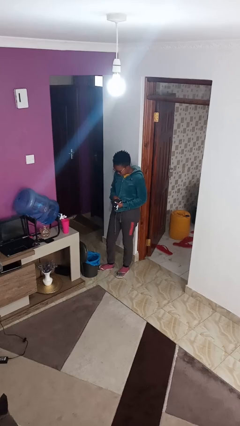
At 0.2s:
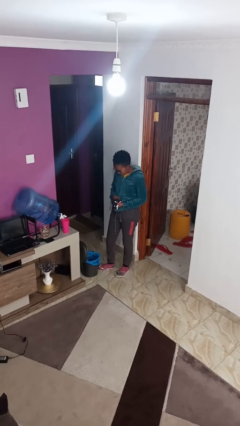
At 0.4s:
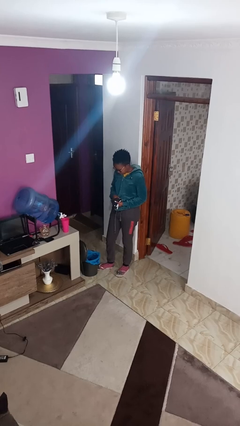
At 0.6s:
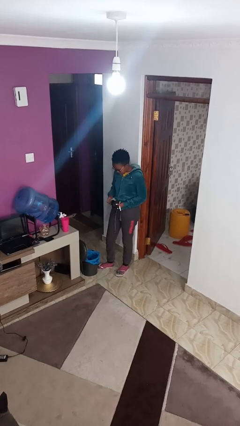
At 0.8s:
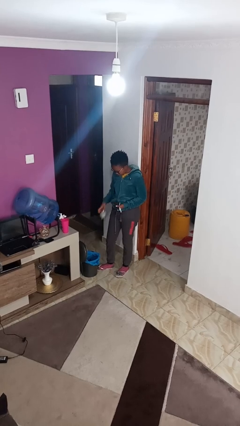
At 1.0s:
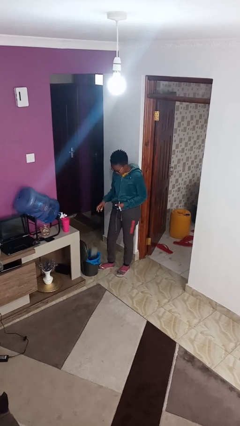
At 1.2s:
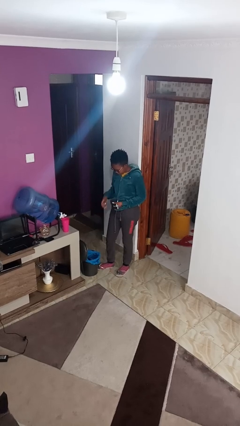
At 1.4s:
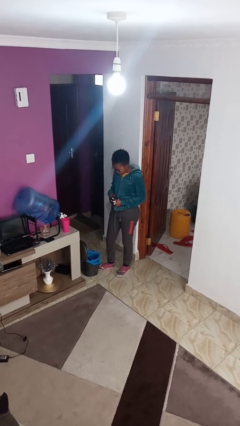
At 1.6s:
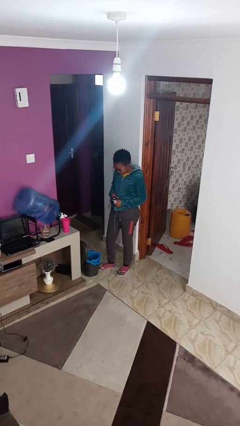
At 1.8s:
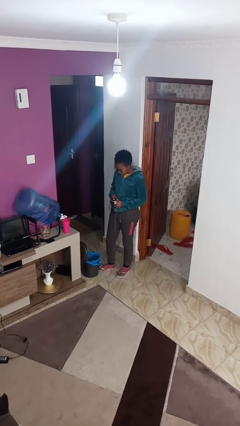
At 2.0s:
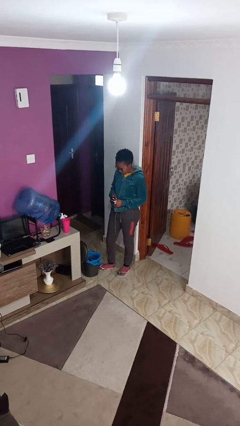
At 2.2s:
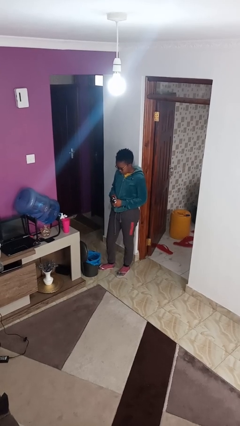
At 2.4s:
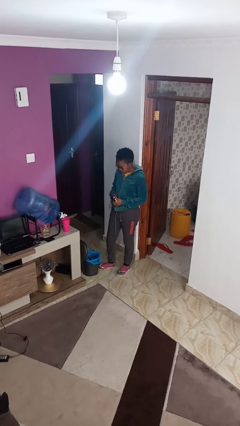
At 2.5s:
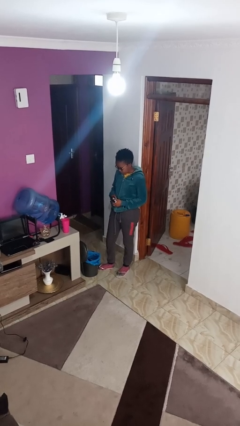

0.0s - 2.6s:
person discards trash

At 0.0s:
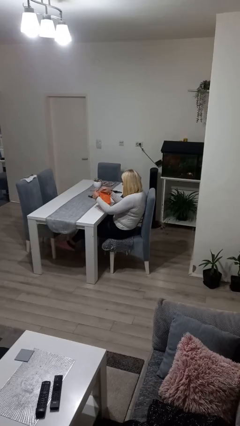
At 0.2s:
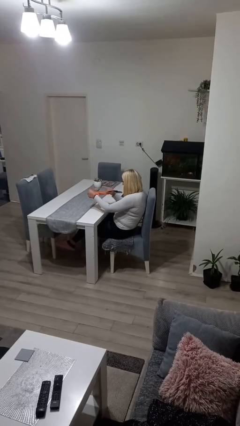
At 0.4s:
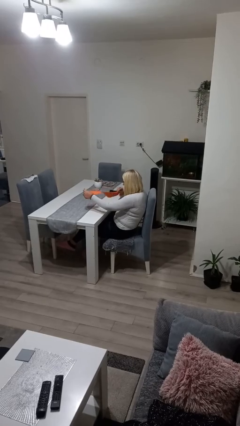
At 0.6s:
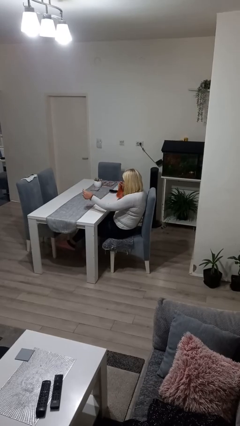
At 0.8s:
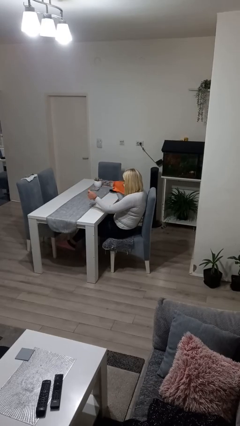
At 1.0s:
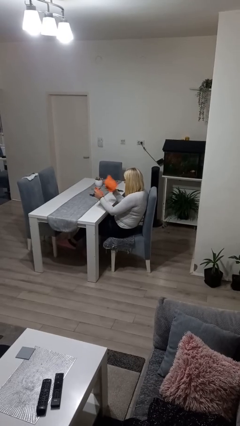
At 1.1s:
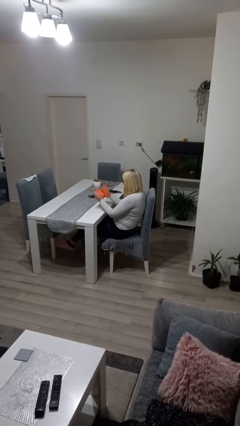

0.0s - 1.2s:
person tears paper

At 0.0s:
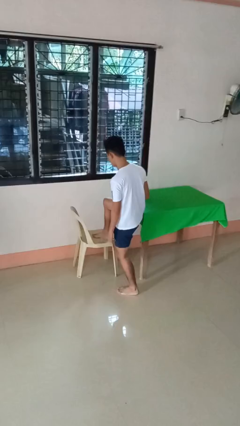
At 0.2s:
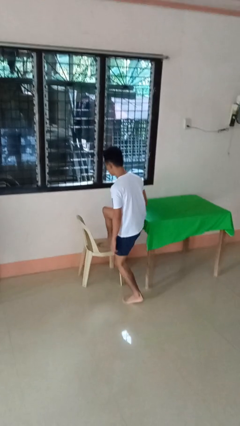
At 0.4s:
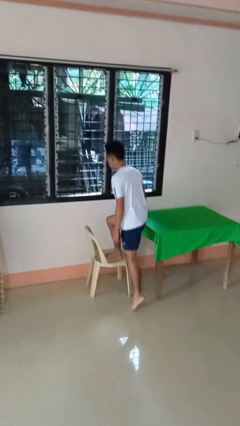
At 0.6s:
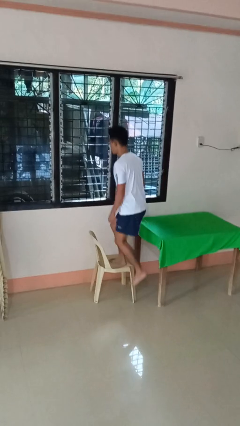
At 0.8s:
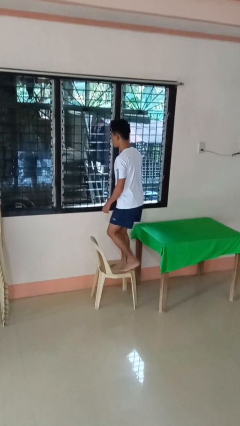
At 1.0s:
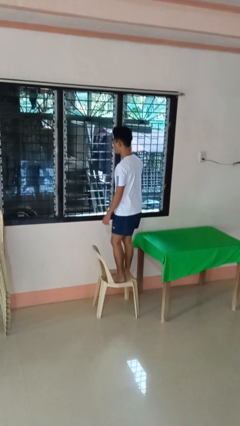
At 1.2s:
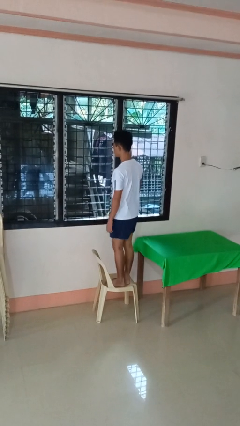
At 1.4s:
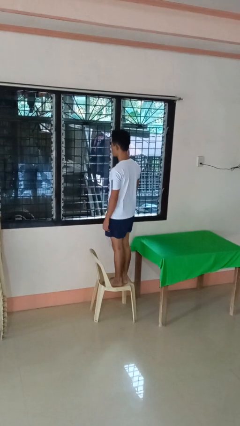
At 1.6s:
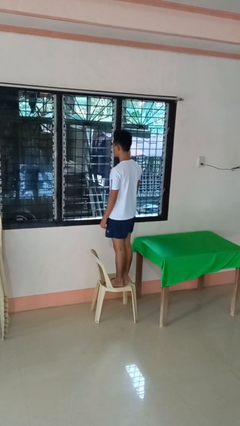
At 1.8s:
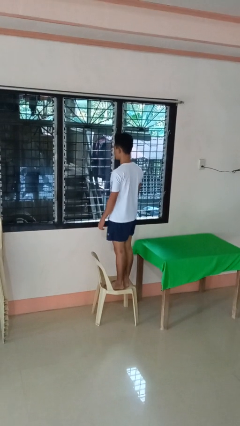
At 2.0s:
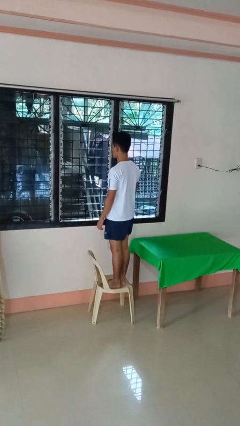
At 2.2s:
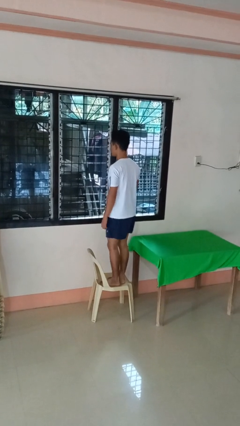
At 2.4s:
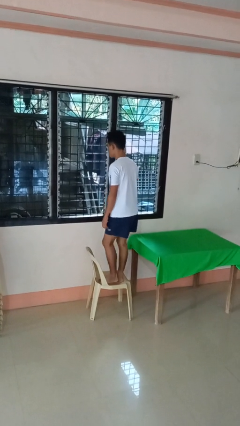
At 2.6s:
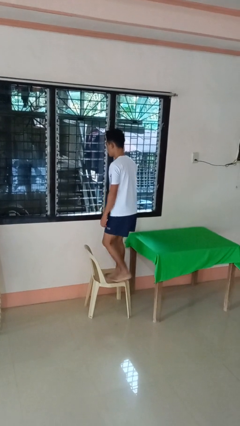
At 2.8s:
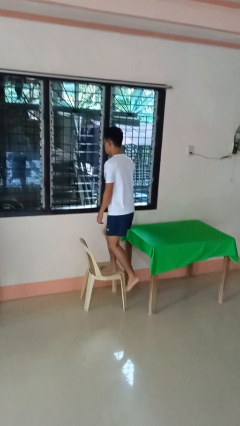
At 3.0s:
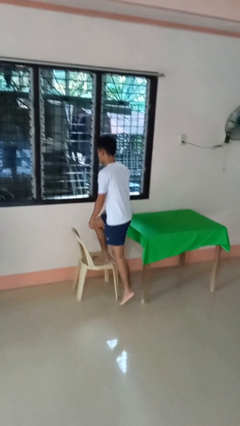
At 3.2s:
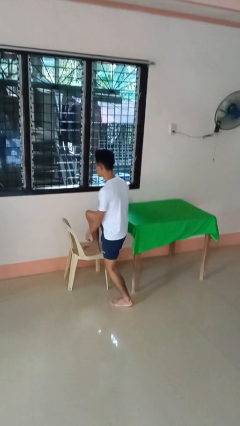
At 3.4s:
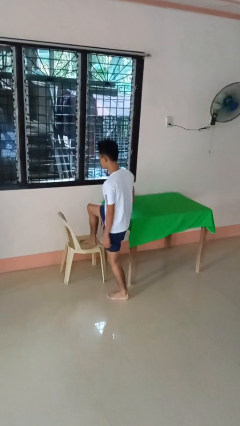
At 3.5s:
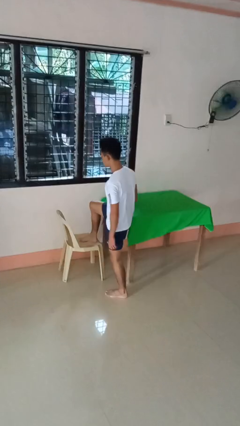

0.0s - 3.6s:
person climbs on chair

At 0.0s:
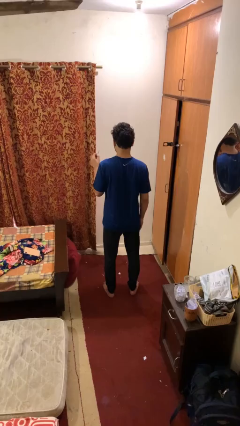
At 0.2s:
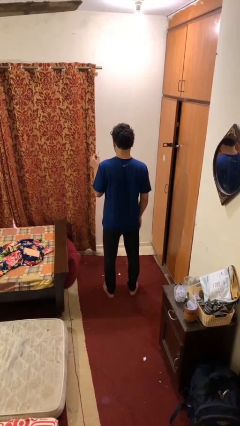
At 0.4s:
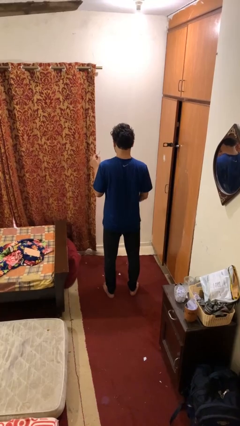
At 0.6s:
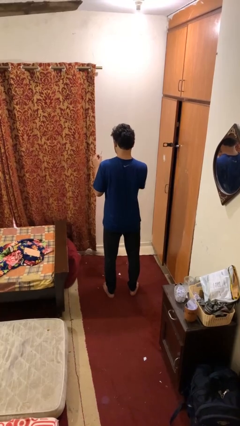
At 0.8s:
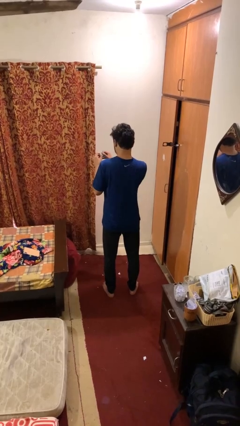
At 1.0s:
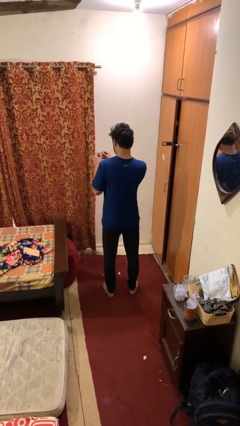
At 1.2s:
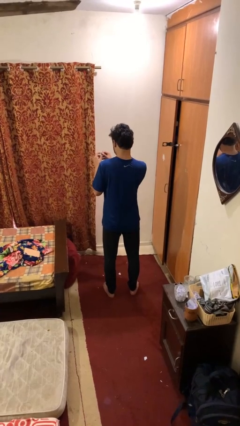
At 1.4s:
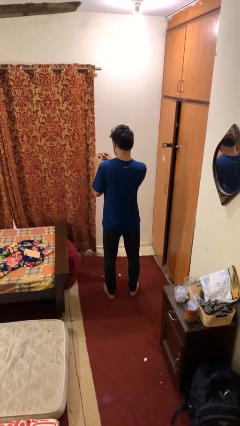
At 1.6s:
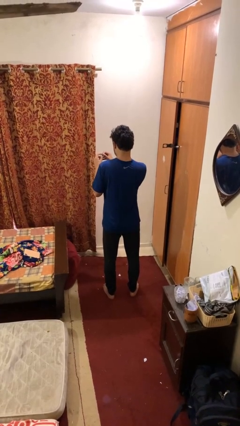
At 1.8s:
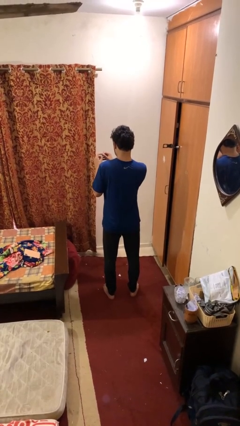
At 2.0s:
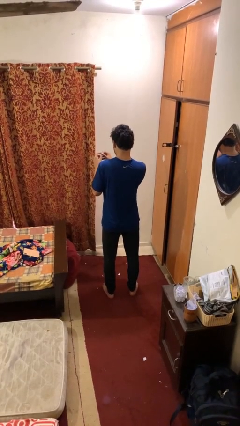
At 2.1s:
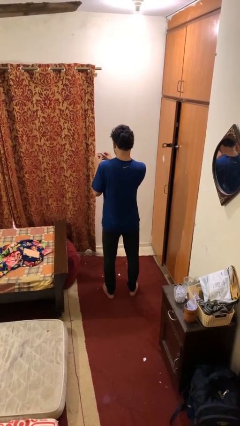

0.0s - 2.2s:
person files fingernails

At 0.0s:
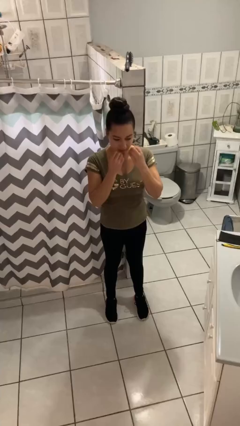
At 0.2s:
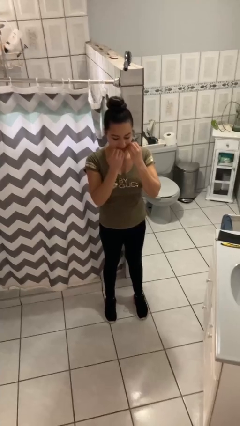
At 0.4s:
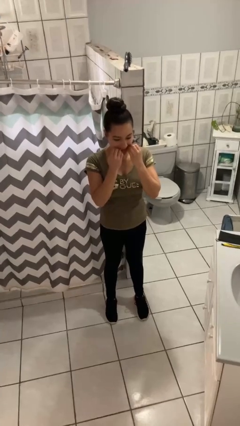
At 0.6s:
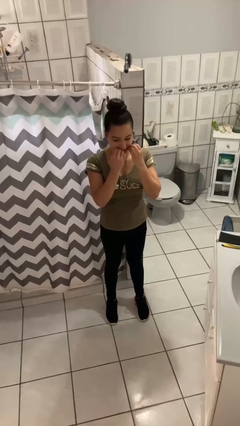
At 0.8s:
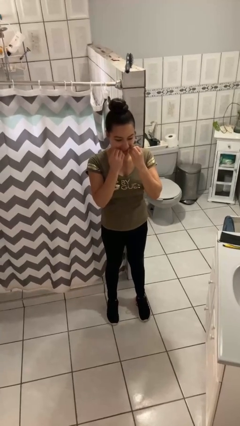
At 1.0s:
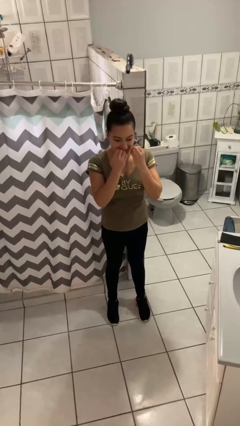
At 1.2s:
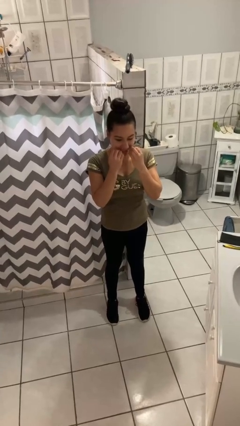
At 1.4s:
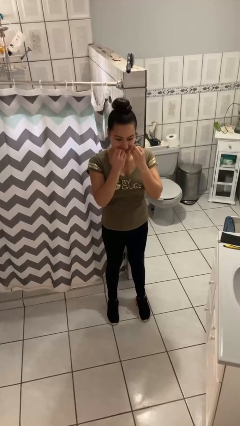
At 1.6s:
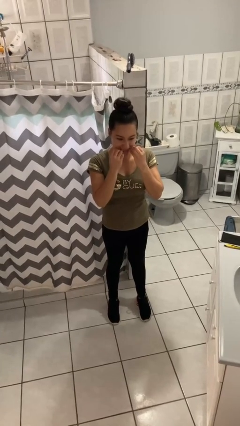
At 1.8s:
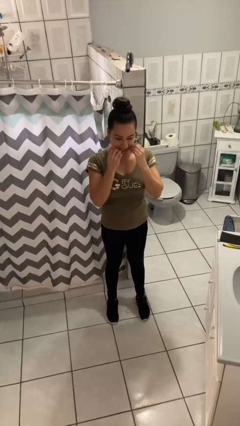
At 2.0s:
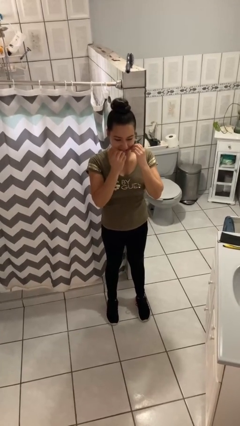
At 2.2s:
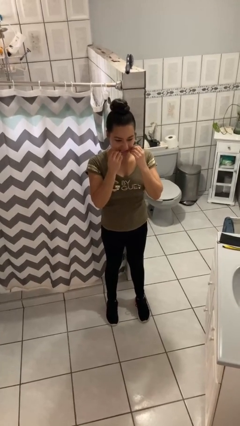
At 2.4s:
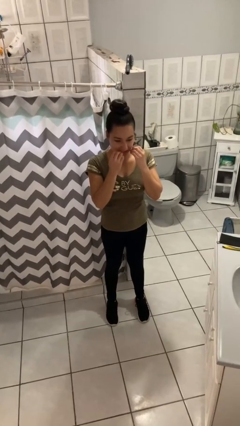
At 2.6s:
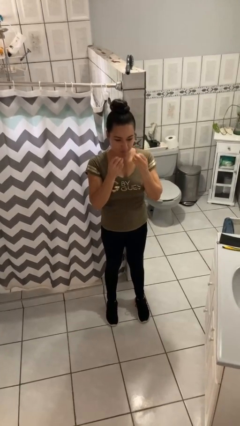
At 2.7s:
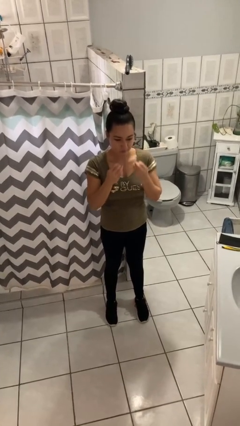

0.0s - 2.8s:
person flosses

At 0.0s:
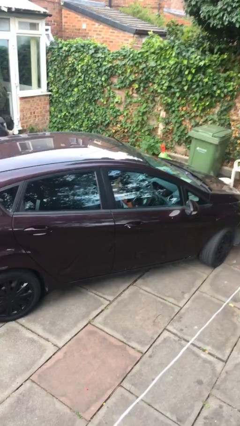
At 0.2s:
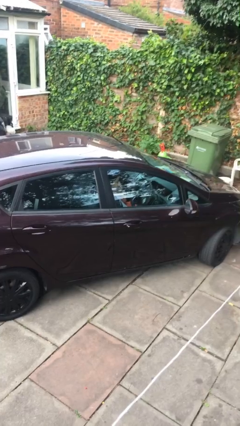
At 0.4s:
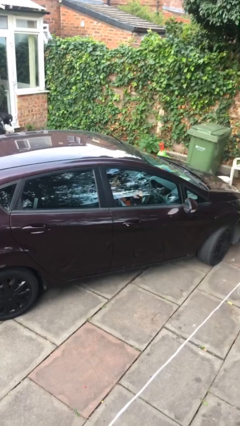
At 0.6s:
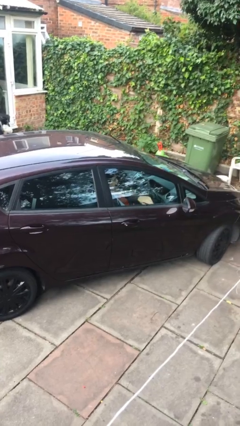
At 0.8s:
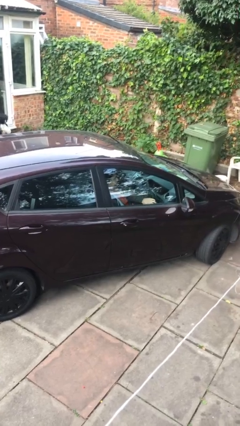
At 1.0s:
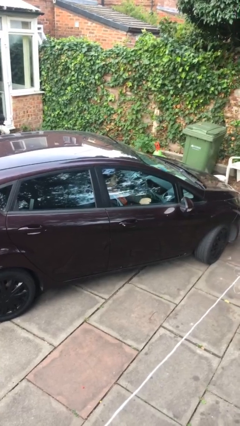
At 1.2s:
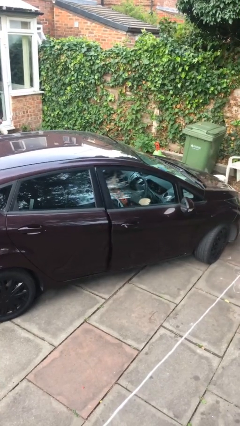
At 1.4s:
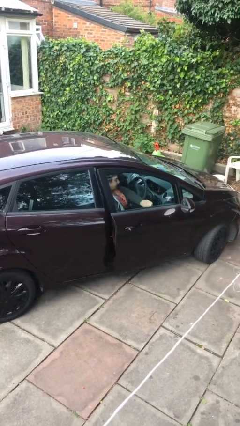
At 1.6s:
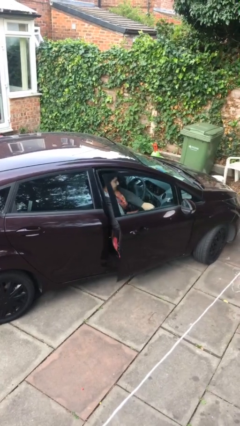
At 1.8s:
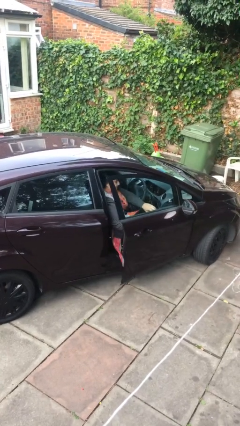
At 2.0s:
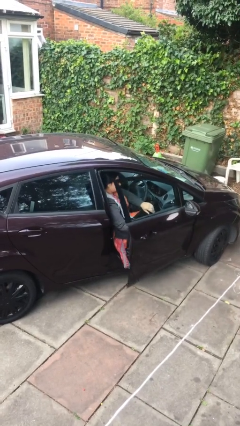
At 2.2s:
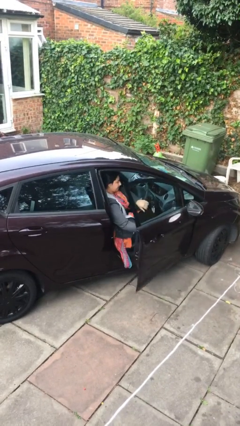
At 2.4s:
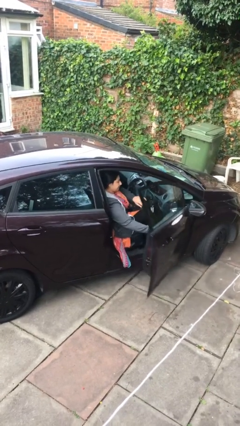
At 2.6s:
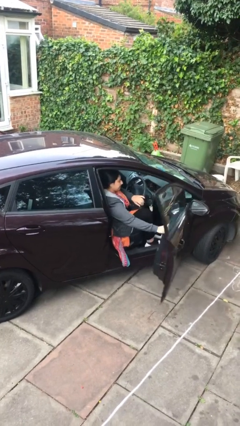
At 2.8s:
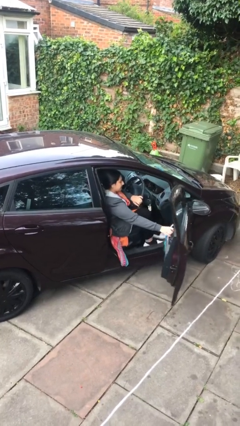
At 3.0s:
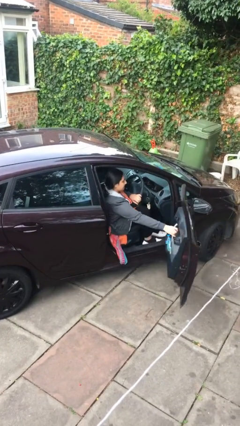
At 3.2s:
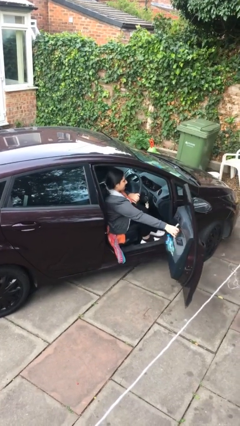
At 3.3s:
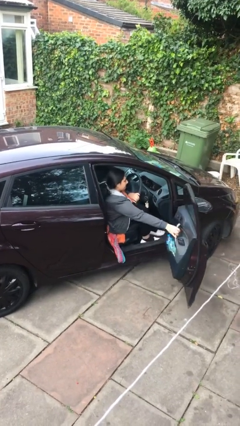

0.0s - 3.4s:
person opens car door

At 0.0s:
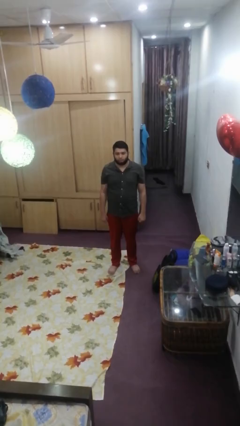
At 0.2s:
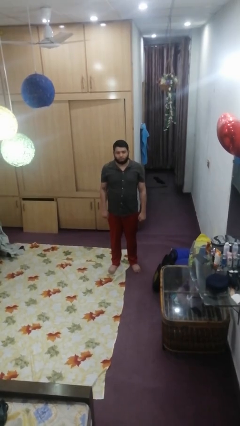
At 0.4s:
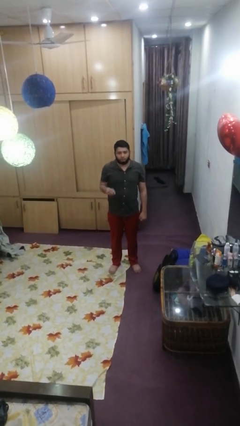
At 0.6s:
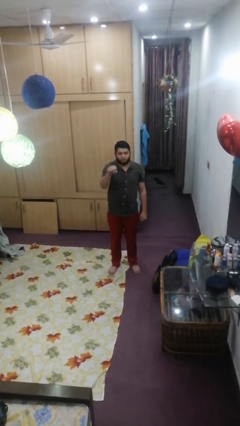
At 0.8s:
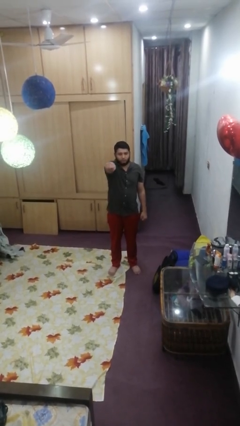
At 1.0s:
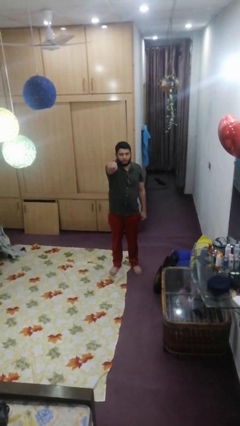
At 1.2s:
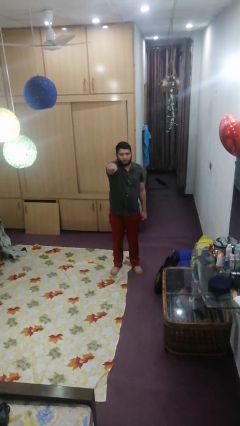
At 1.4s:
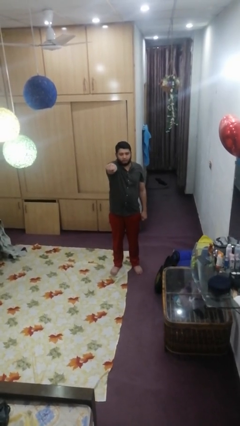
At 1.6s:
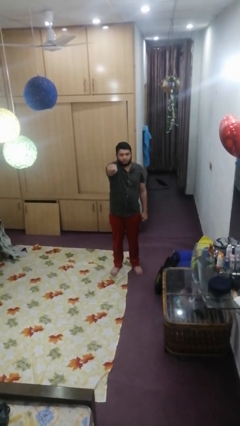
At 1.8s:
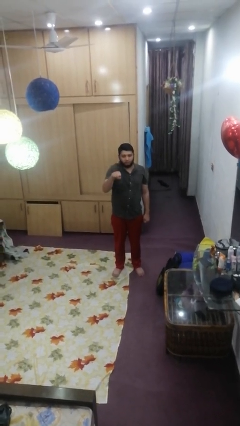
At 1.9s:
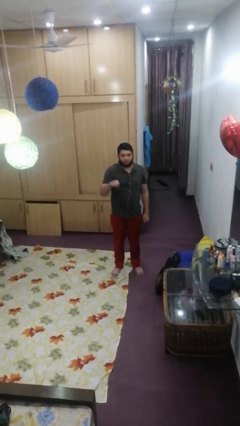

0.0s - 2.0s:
person punches
